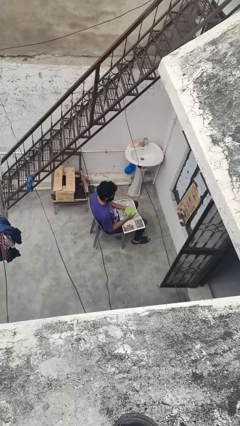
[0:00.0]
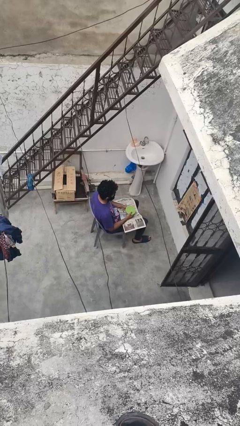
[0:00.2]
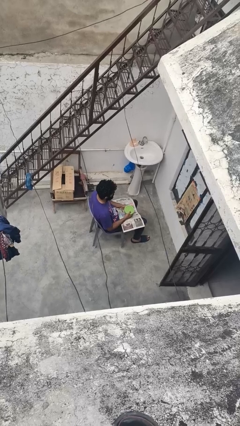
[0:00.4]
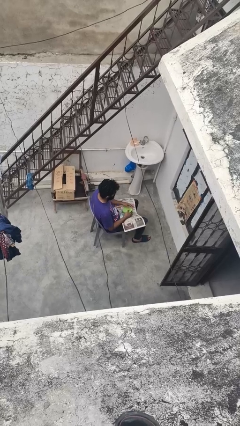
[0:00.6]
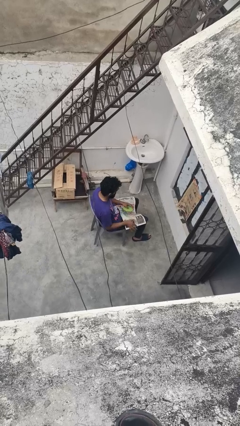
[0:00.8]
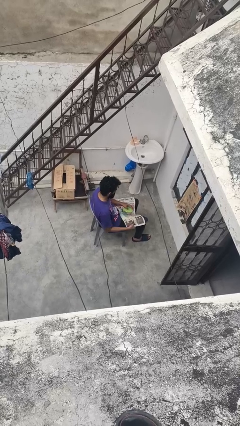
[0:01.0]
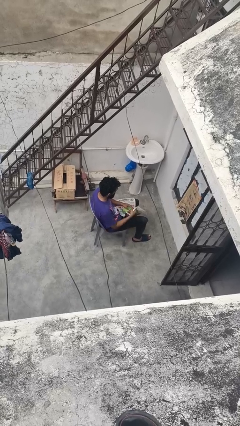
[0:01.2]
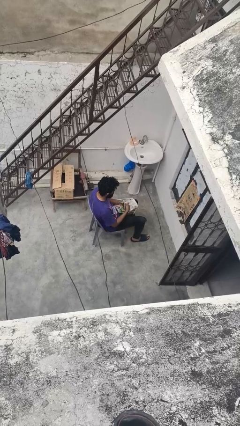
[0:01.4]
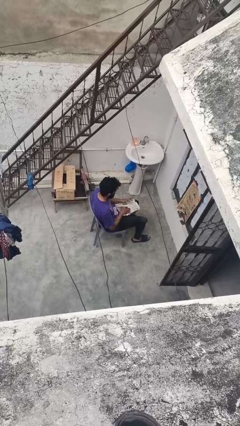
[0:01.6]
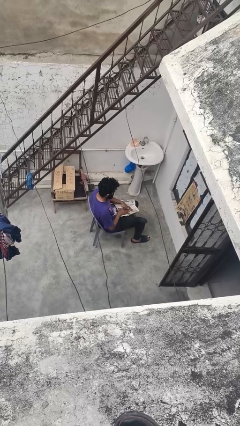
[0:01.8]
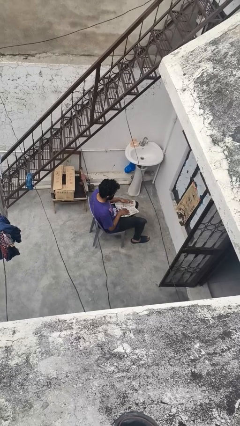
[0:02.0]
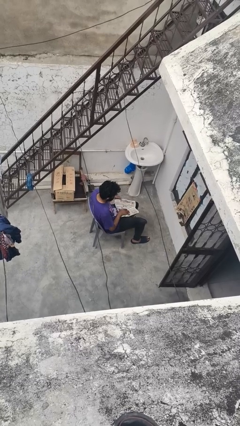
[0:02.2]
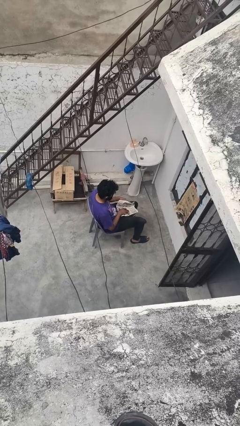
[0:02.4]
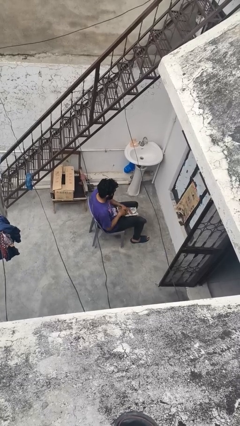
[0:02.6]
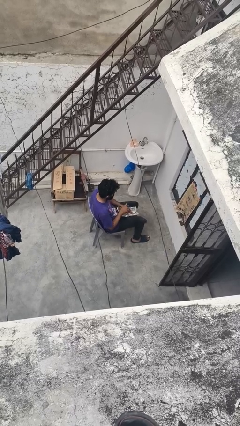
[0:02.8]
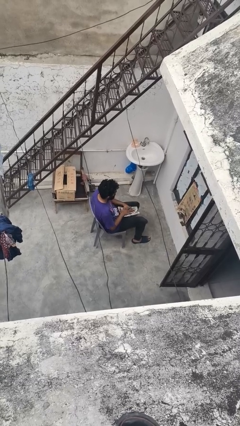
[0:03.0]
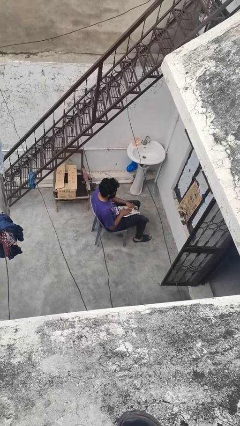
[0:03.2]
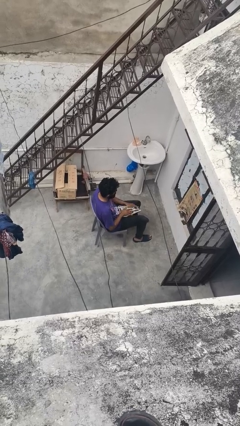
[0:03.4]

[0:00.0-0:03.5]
person wraps box

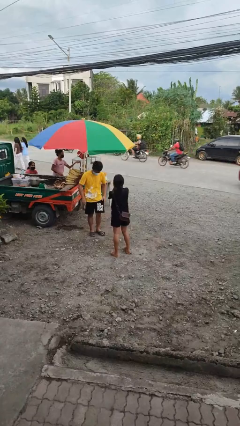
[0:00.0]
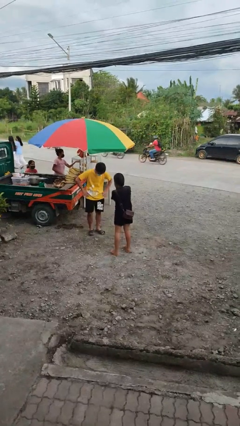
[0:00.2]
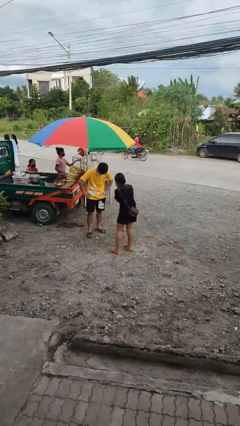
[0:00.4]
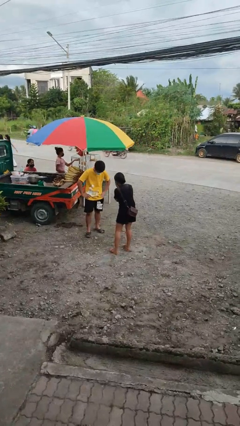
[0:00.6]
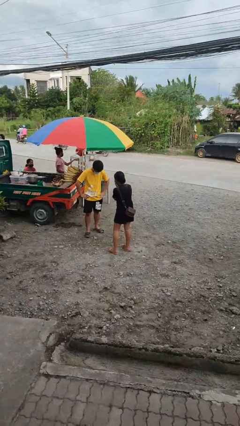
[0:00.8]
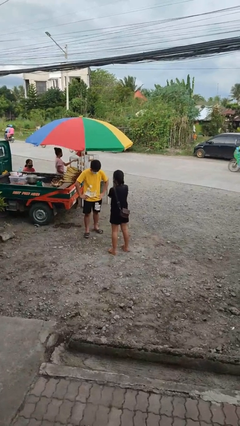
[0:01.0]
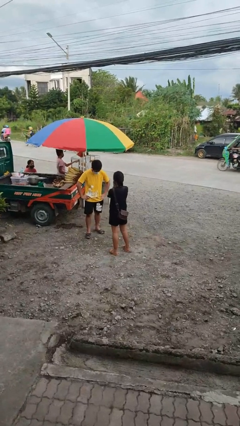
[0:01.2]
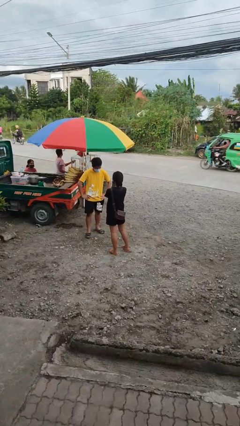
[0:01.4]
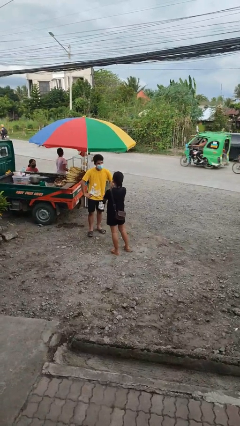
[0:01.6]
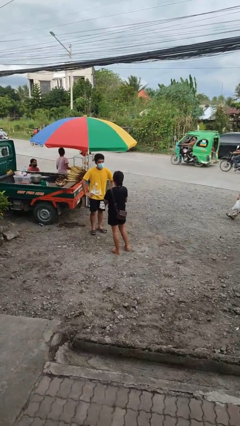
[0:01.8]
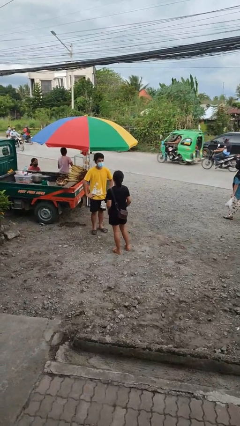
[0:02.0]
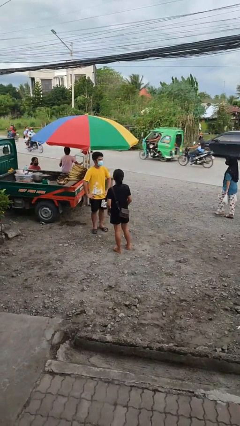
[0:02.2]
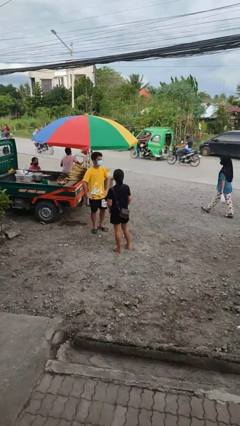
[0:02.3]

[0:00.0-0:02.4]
person laughs with person

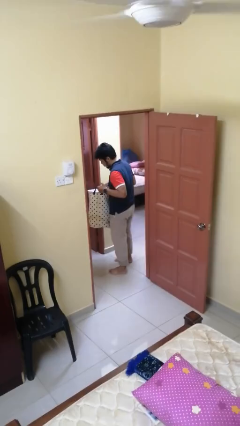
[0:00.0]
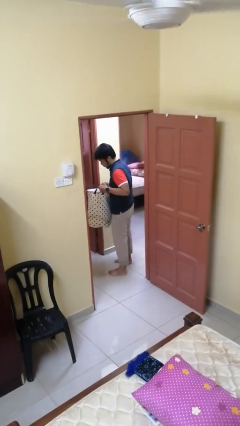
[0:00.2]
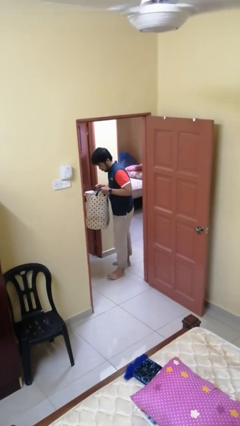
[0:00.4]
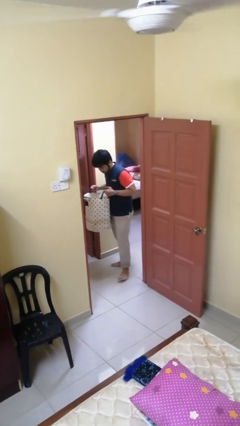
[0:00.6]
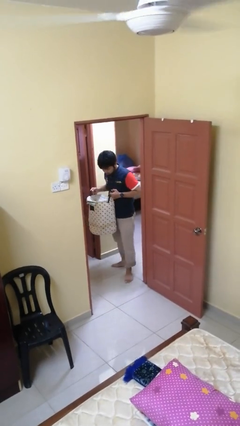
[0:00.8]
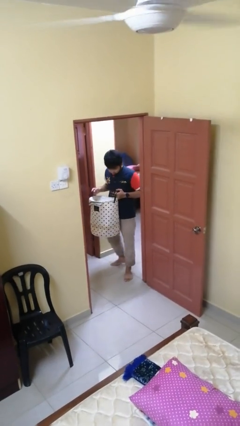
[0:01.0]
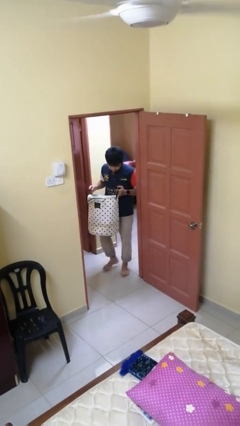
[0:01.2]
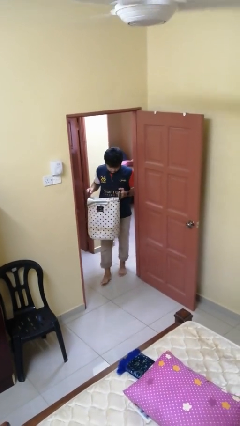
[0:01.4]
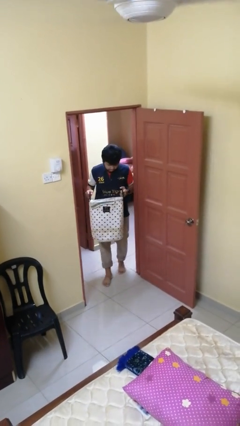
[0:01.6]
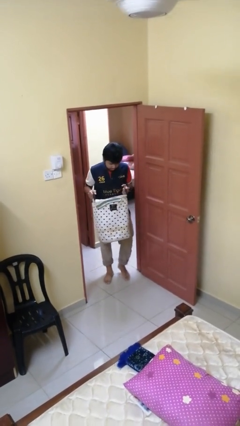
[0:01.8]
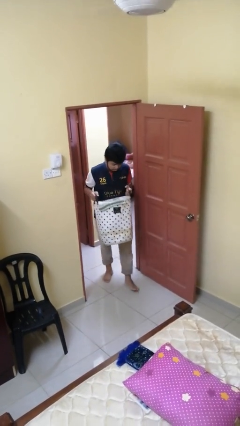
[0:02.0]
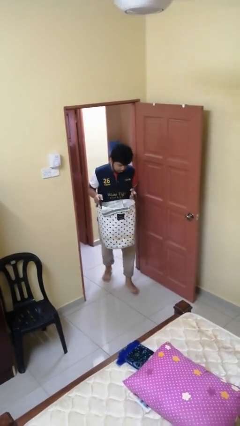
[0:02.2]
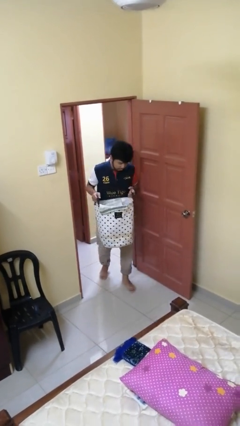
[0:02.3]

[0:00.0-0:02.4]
person carries laundry basket

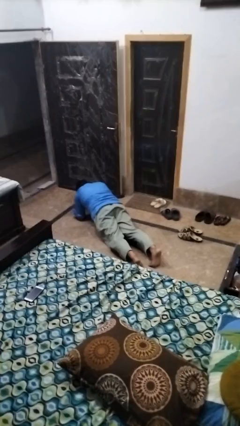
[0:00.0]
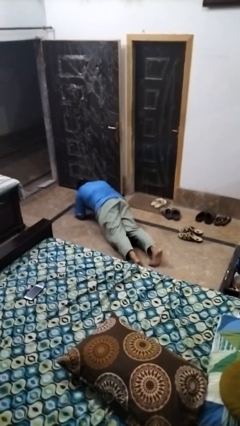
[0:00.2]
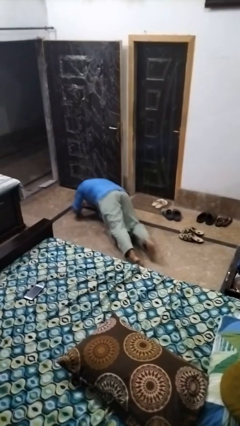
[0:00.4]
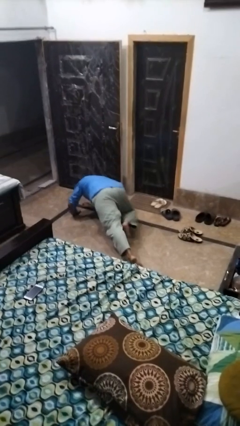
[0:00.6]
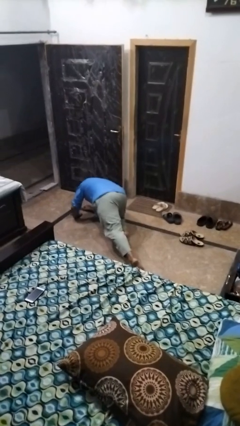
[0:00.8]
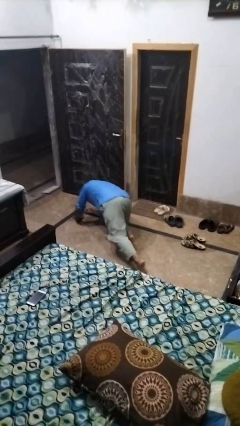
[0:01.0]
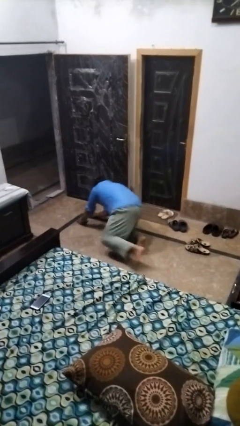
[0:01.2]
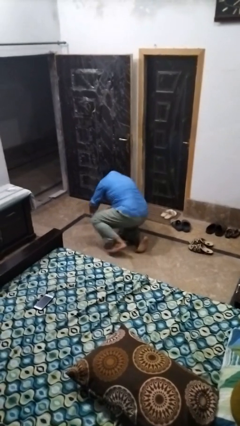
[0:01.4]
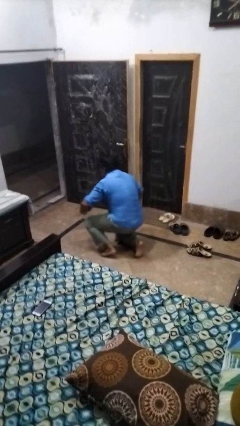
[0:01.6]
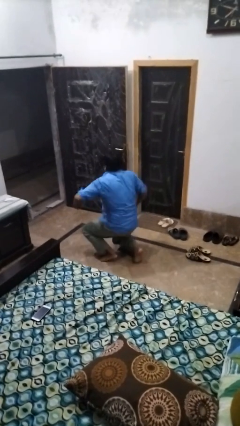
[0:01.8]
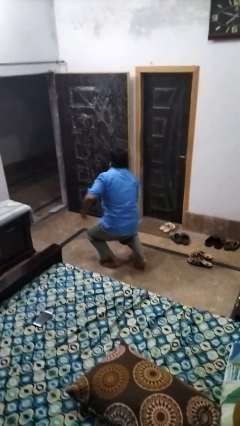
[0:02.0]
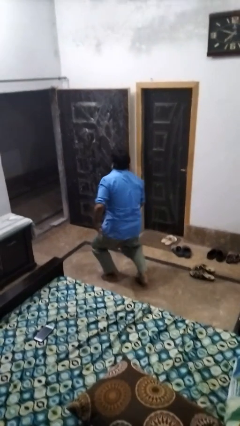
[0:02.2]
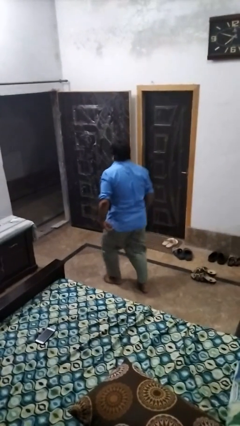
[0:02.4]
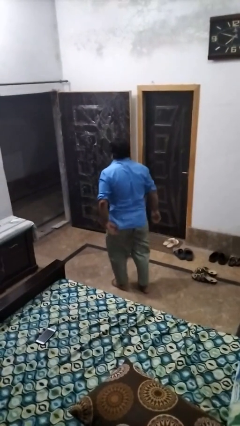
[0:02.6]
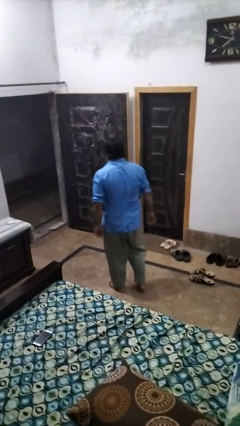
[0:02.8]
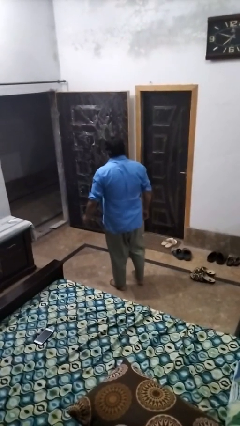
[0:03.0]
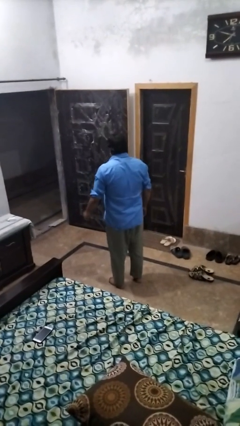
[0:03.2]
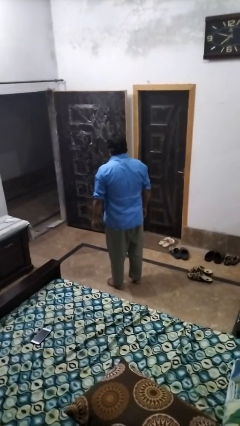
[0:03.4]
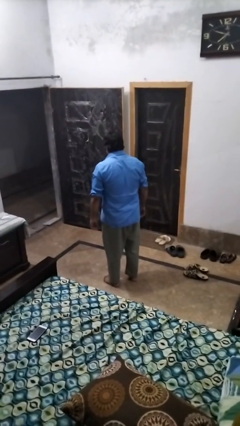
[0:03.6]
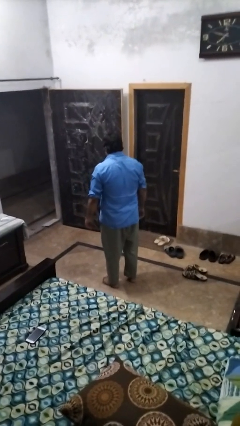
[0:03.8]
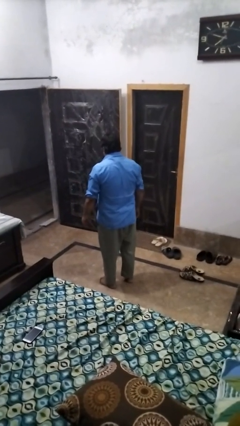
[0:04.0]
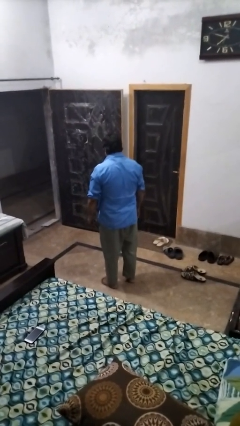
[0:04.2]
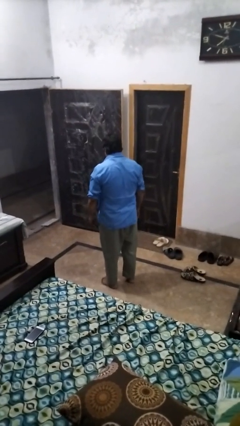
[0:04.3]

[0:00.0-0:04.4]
person stands up from floor

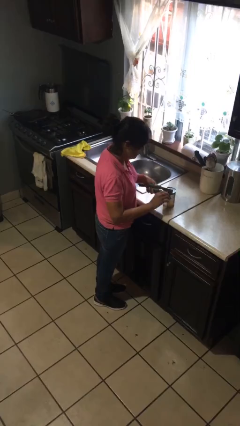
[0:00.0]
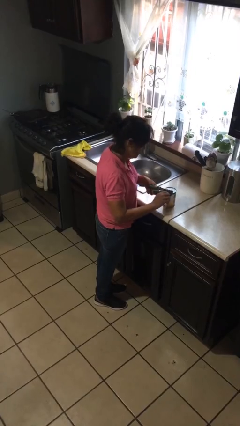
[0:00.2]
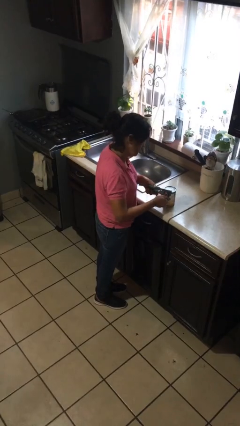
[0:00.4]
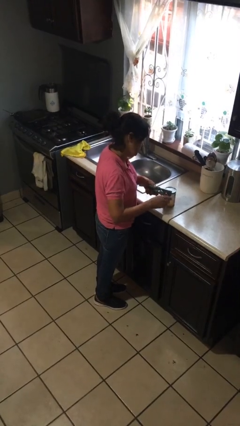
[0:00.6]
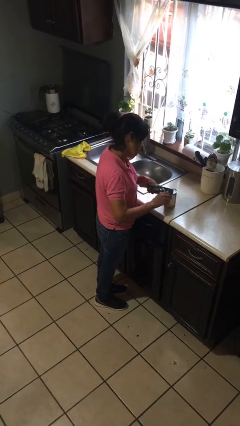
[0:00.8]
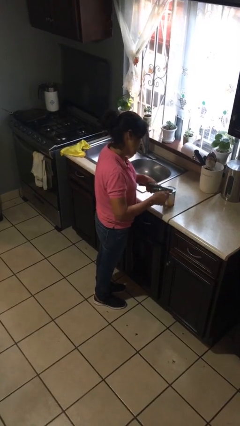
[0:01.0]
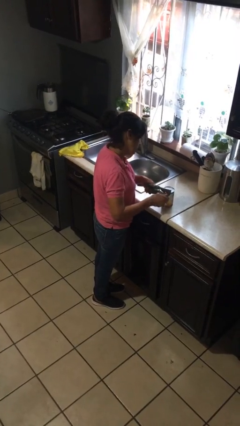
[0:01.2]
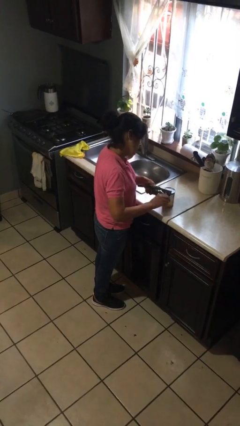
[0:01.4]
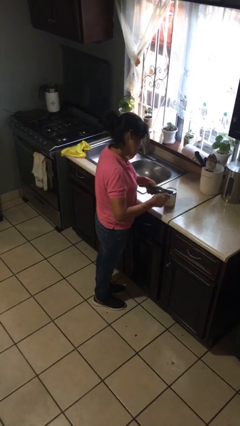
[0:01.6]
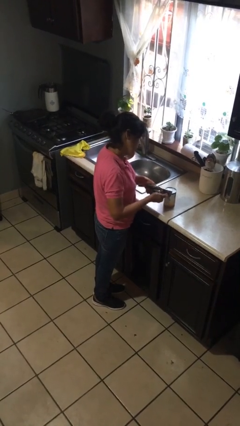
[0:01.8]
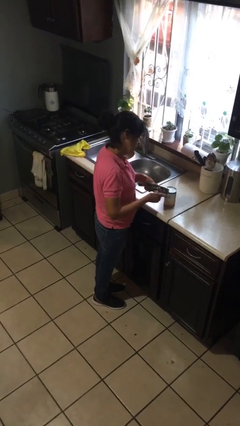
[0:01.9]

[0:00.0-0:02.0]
person opens can with can opener

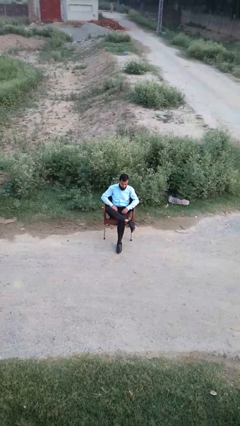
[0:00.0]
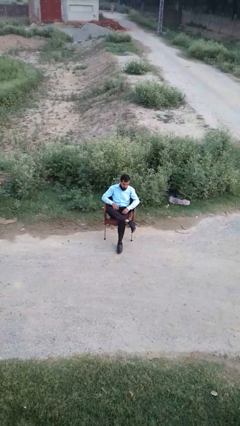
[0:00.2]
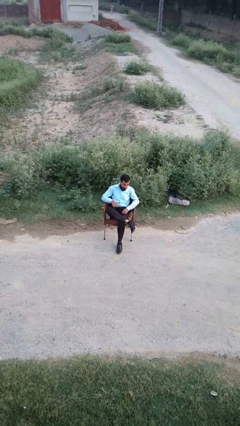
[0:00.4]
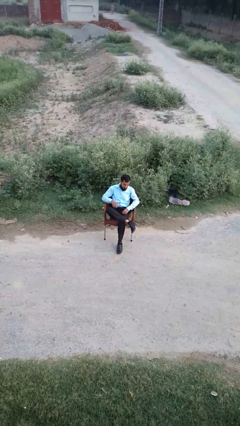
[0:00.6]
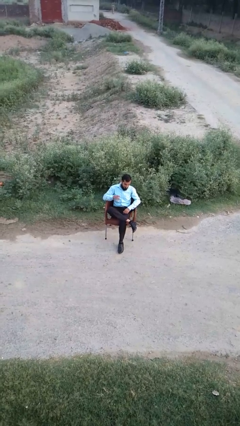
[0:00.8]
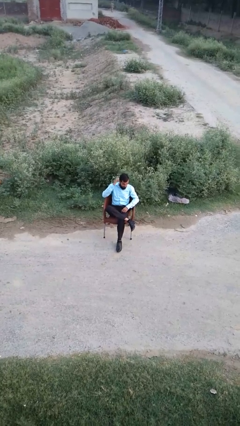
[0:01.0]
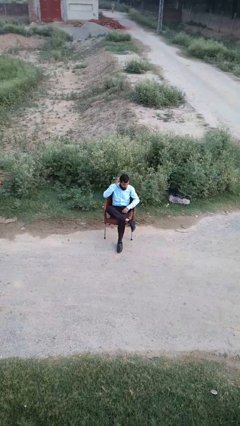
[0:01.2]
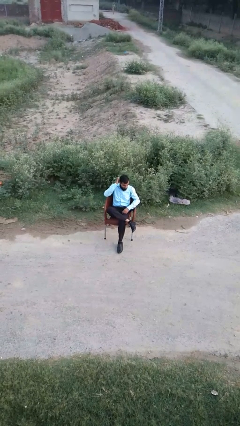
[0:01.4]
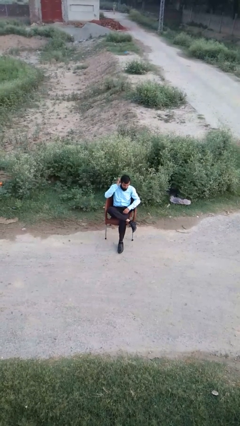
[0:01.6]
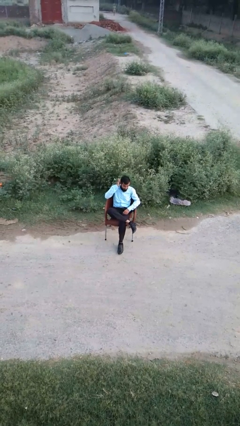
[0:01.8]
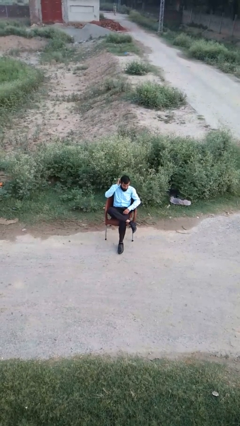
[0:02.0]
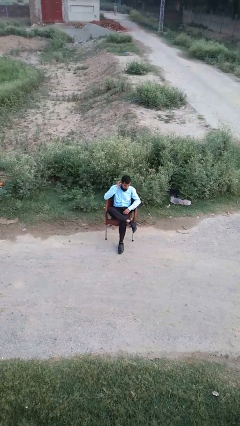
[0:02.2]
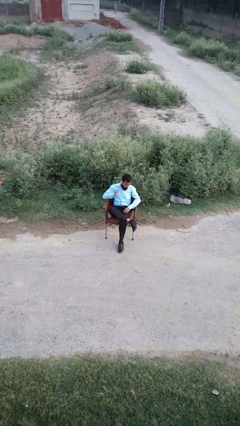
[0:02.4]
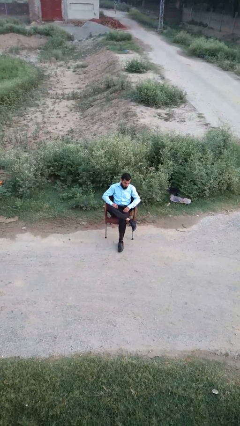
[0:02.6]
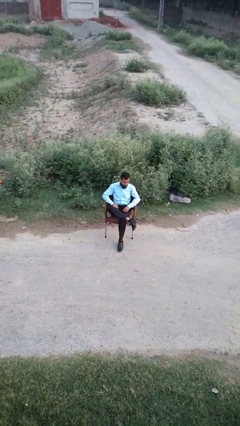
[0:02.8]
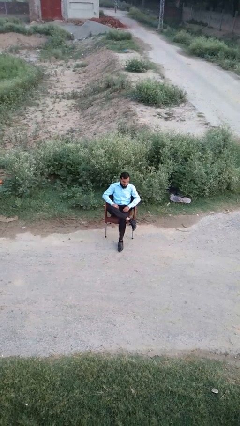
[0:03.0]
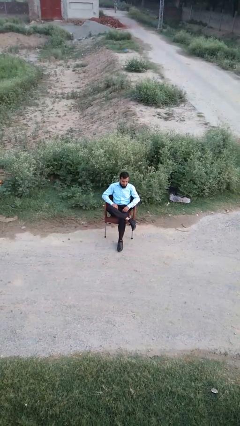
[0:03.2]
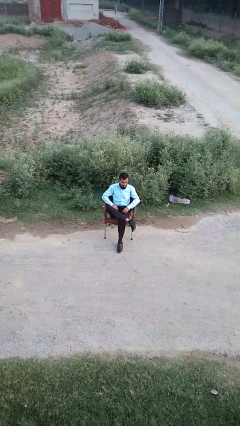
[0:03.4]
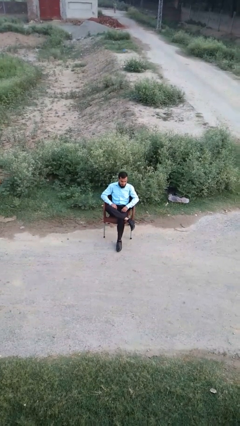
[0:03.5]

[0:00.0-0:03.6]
person scratches face
